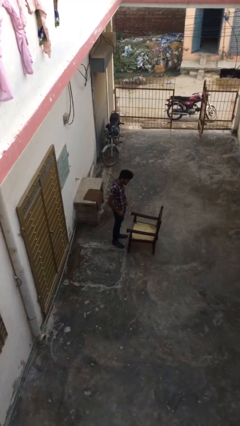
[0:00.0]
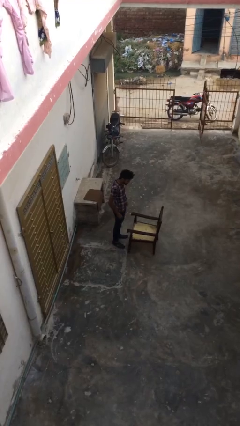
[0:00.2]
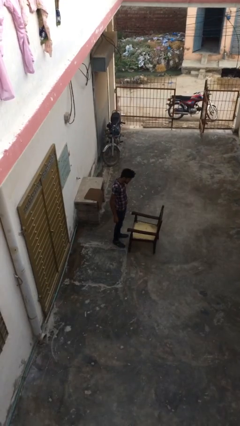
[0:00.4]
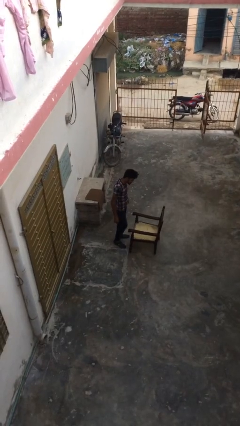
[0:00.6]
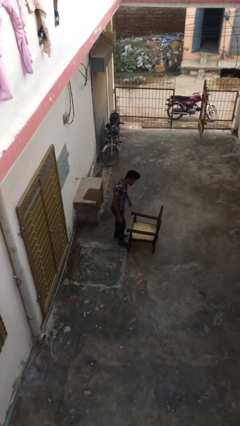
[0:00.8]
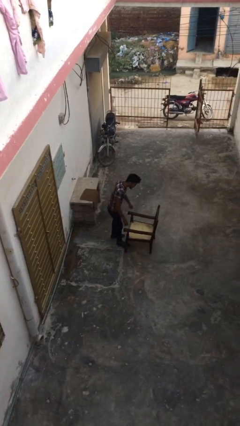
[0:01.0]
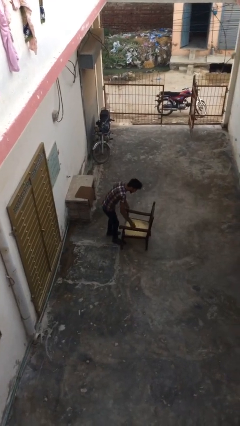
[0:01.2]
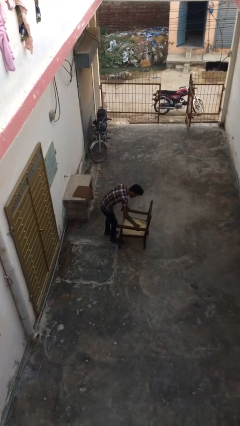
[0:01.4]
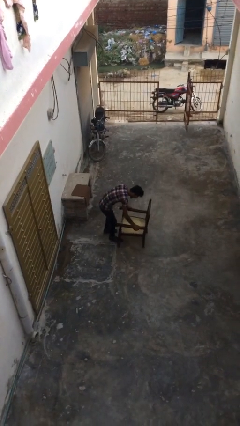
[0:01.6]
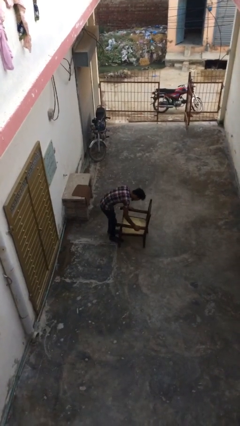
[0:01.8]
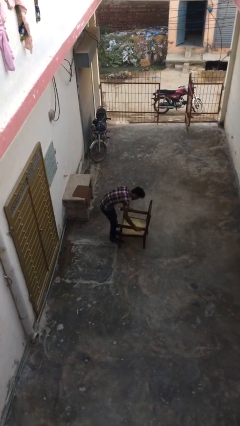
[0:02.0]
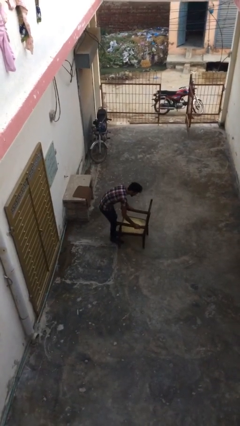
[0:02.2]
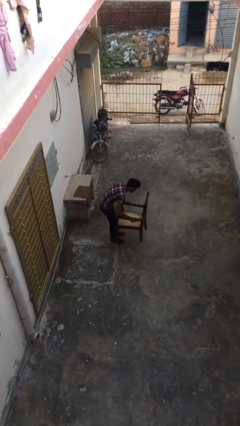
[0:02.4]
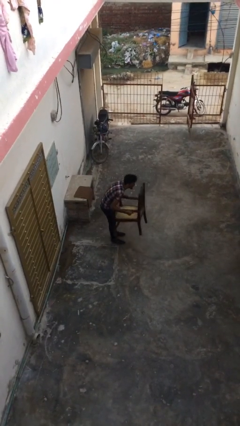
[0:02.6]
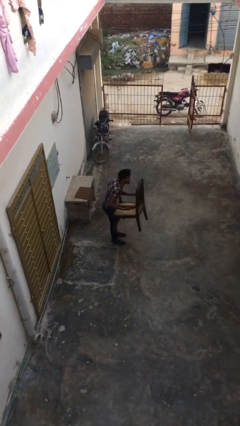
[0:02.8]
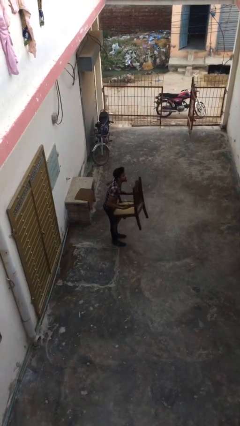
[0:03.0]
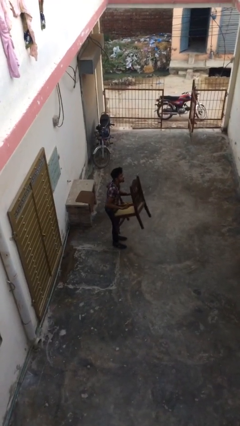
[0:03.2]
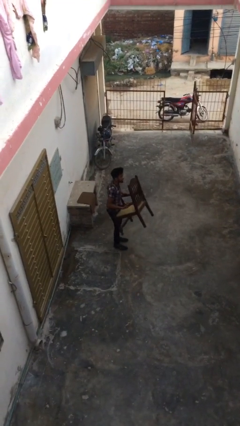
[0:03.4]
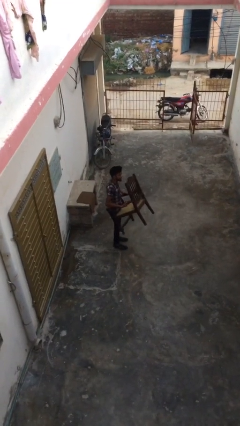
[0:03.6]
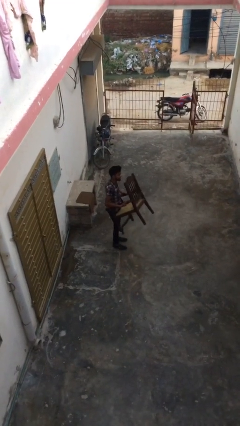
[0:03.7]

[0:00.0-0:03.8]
person picks up object from floor

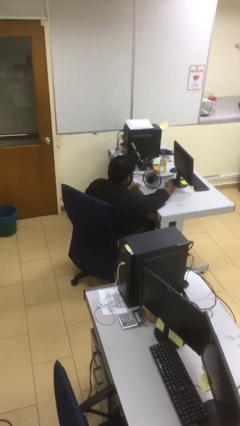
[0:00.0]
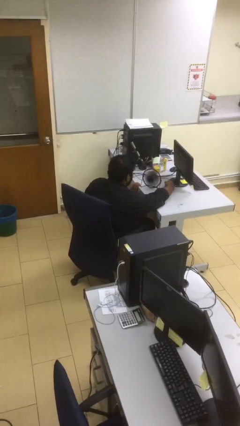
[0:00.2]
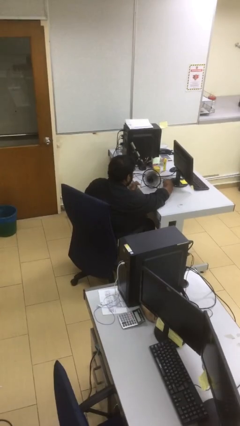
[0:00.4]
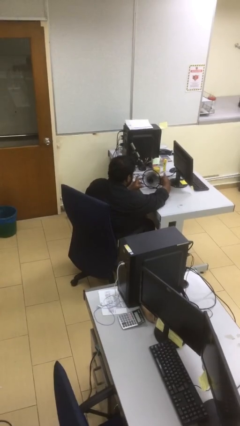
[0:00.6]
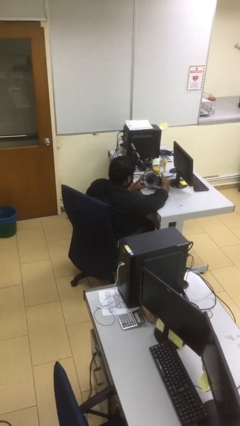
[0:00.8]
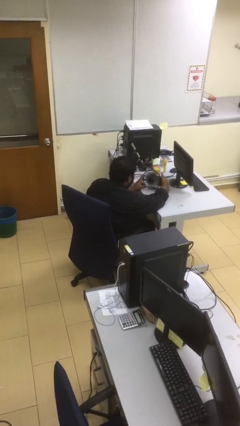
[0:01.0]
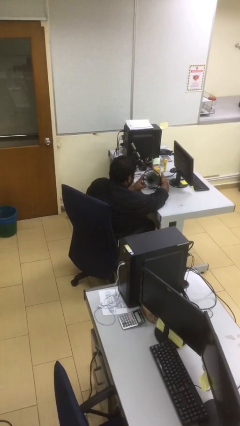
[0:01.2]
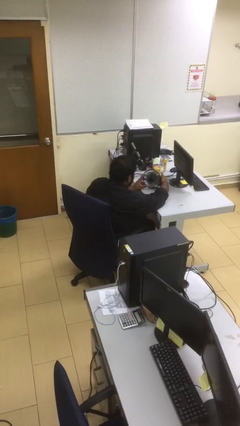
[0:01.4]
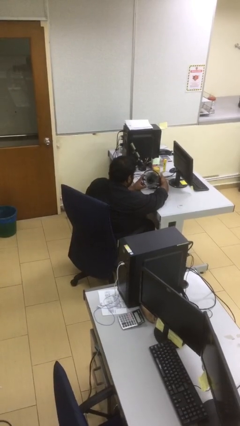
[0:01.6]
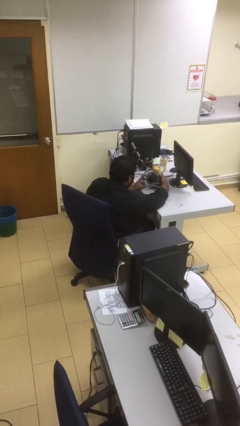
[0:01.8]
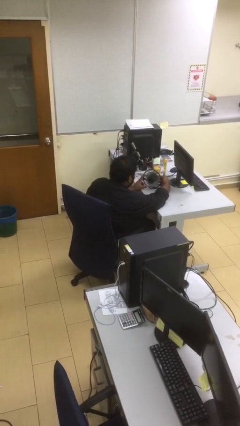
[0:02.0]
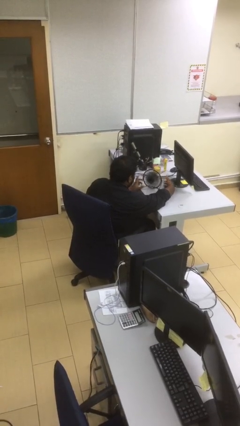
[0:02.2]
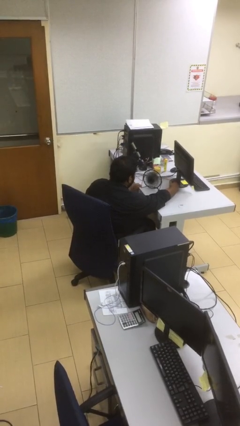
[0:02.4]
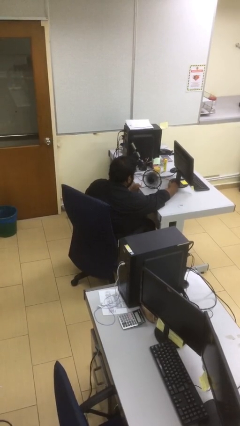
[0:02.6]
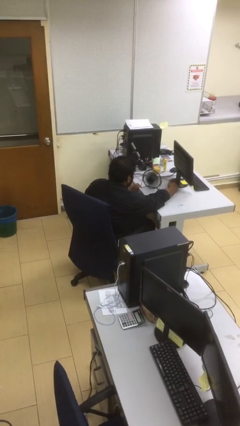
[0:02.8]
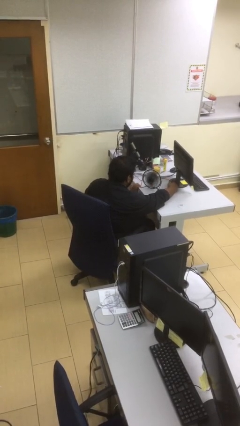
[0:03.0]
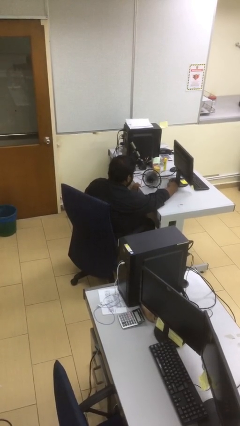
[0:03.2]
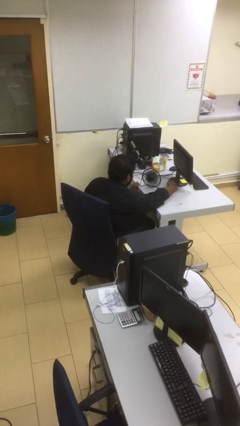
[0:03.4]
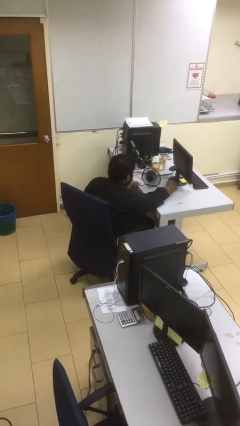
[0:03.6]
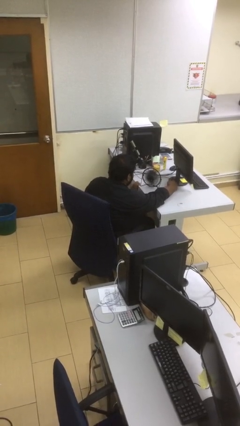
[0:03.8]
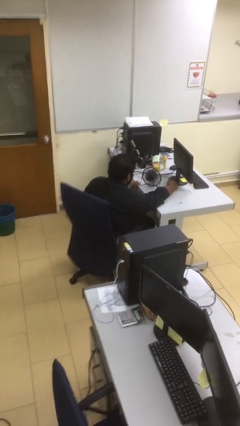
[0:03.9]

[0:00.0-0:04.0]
person turns off fan

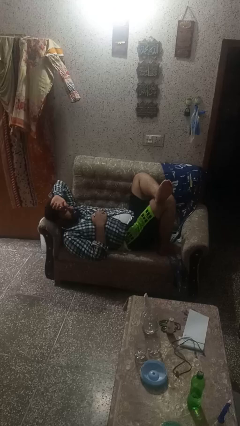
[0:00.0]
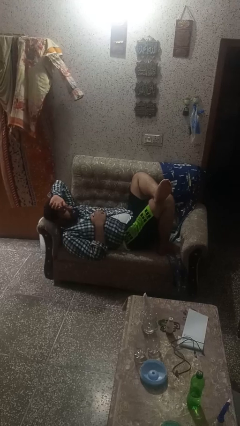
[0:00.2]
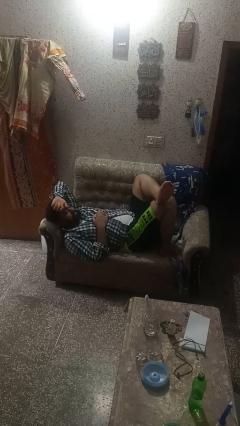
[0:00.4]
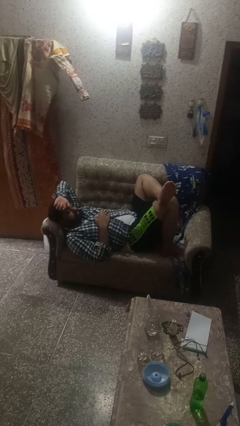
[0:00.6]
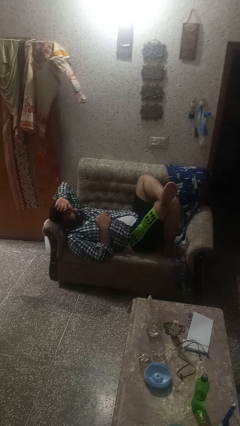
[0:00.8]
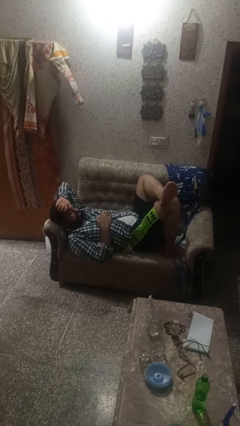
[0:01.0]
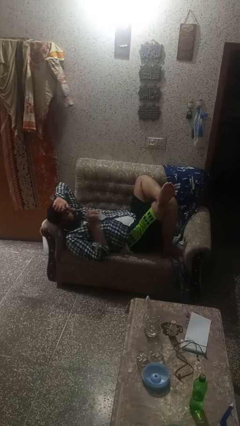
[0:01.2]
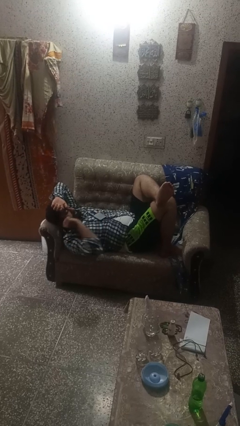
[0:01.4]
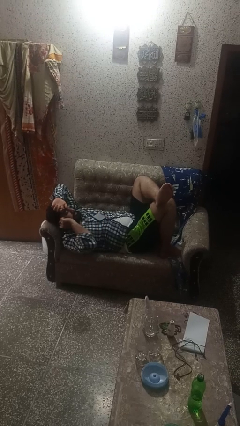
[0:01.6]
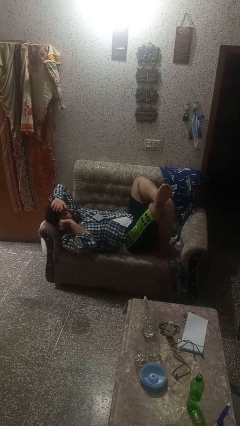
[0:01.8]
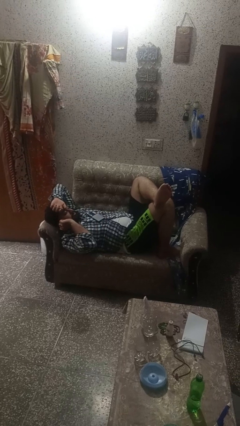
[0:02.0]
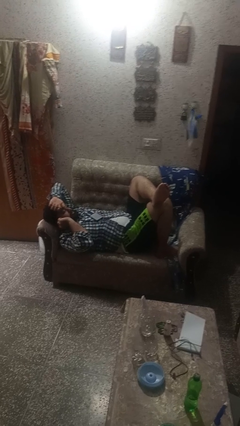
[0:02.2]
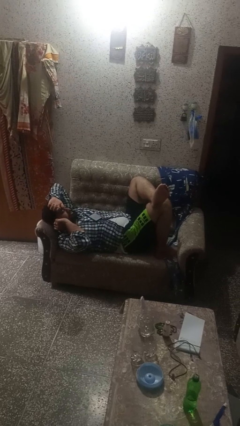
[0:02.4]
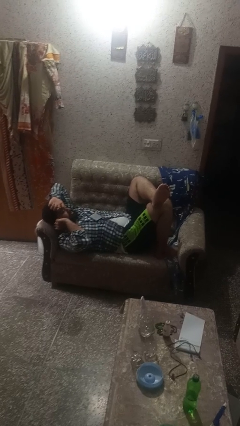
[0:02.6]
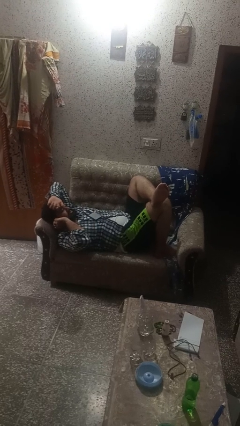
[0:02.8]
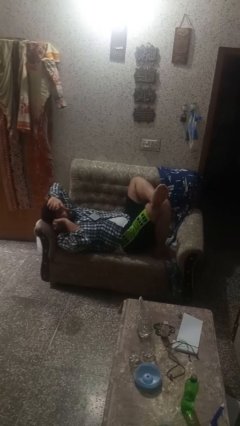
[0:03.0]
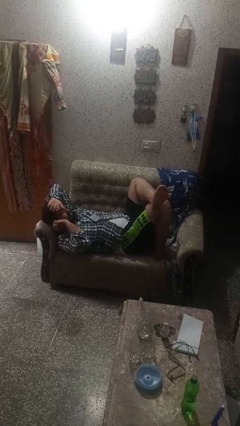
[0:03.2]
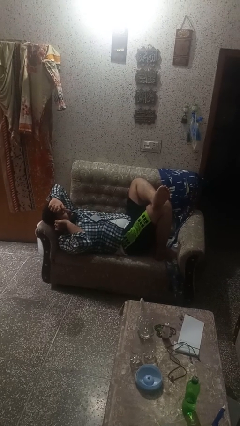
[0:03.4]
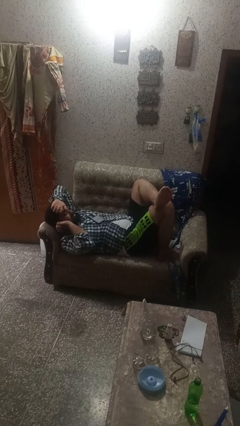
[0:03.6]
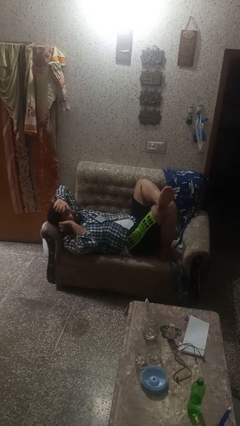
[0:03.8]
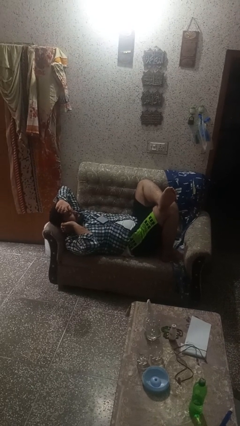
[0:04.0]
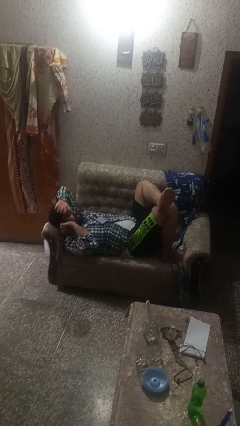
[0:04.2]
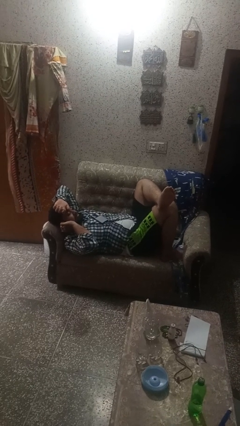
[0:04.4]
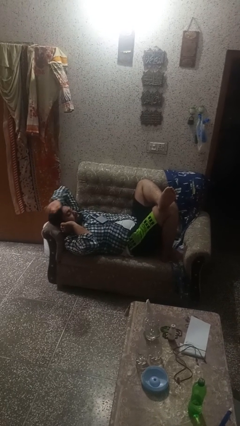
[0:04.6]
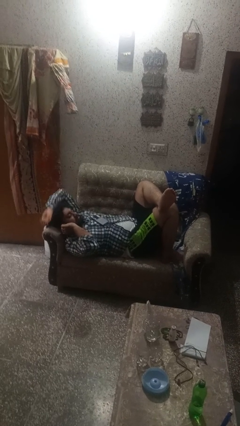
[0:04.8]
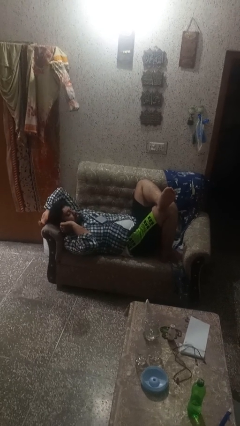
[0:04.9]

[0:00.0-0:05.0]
person touches earlobe

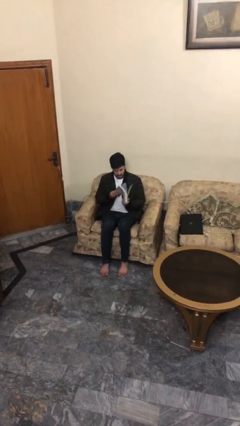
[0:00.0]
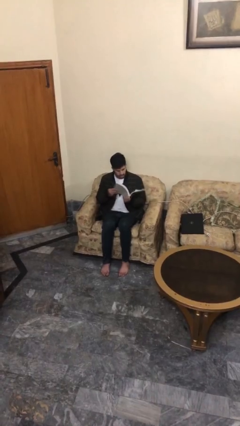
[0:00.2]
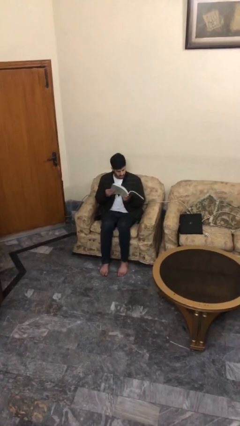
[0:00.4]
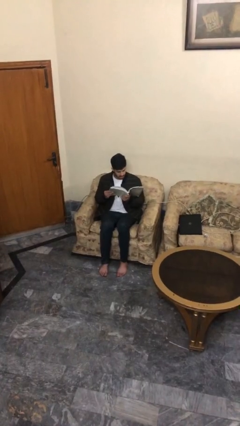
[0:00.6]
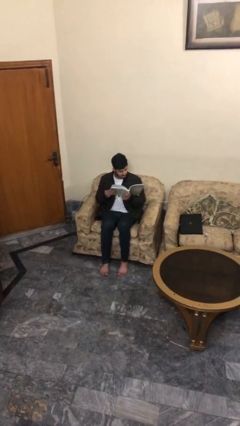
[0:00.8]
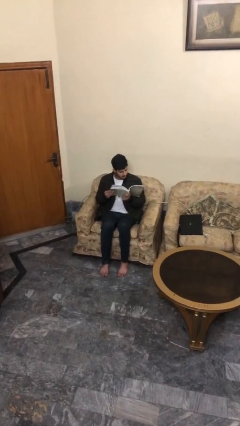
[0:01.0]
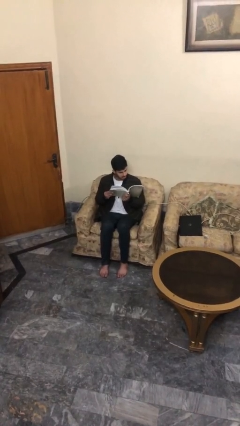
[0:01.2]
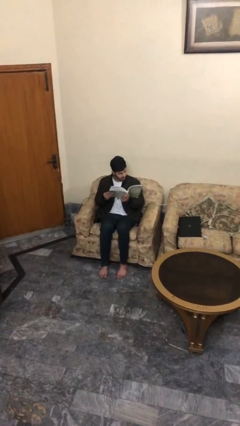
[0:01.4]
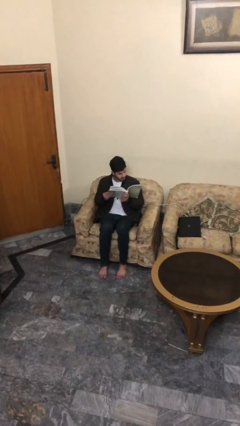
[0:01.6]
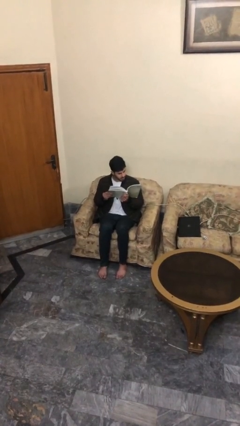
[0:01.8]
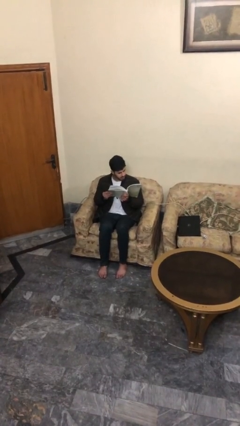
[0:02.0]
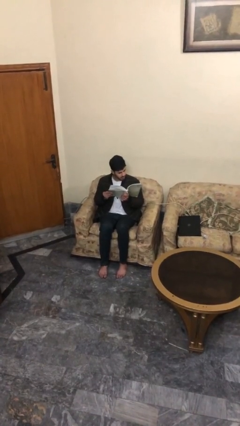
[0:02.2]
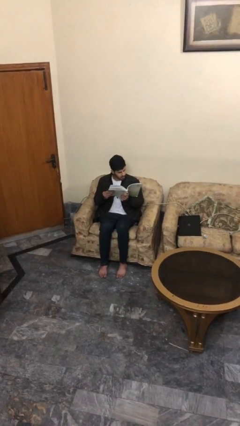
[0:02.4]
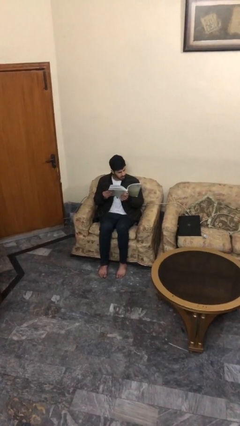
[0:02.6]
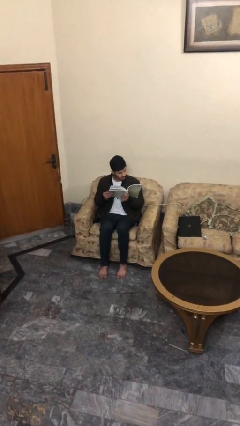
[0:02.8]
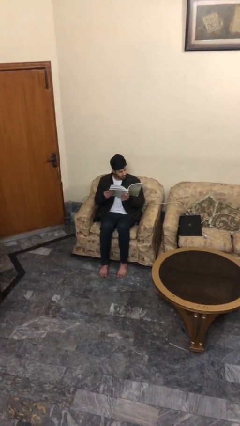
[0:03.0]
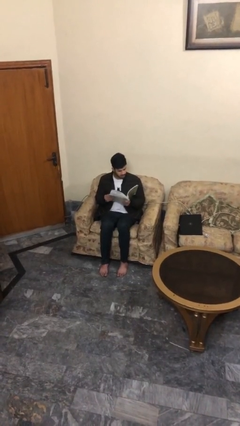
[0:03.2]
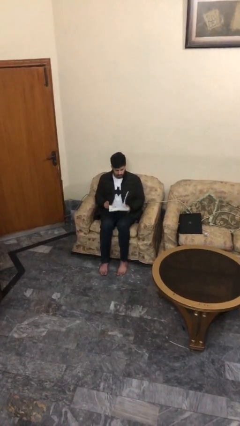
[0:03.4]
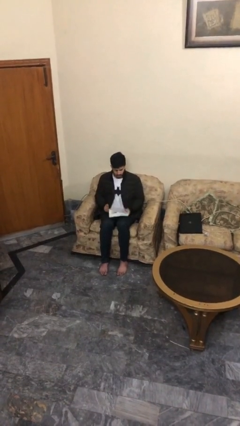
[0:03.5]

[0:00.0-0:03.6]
person reads document

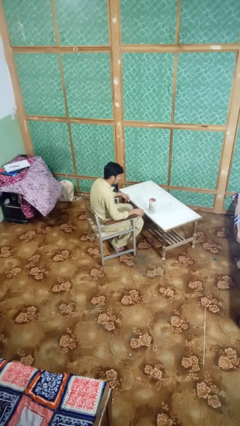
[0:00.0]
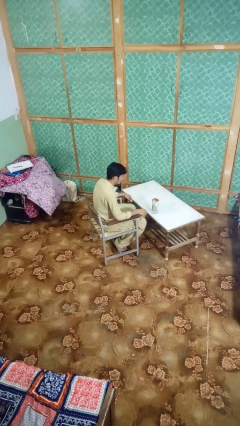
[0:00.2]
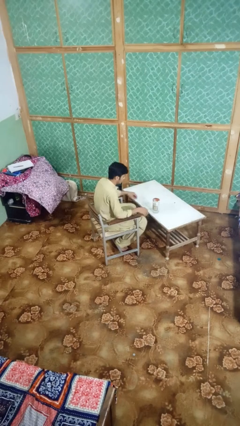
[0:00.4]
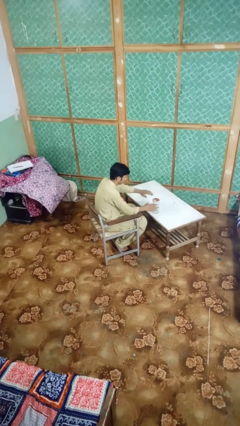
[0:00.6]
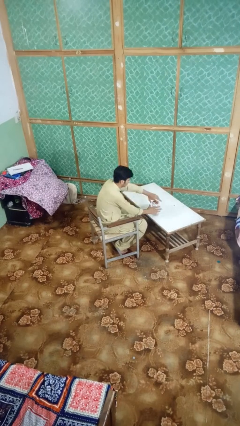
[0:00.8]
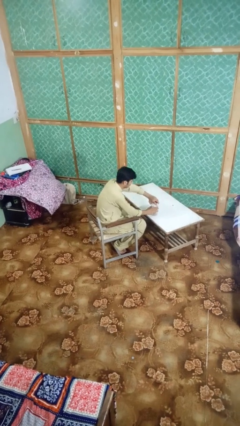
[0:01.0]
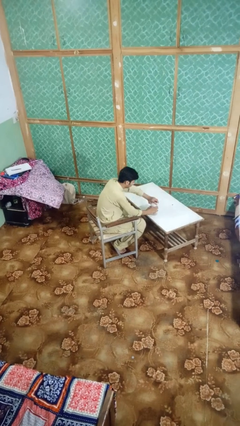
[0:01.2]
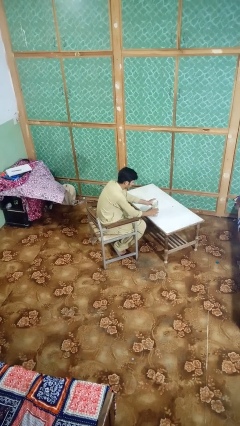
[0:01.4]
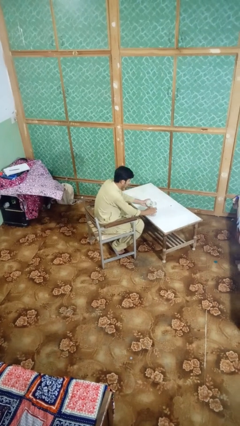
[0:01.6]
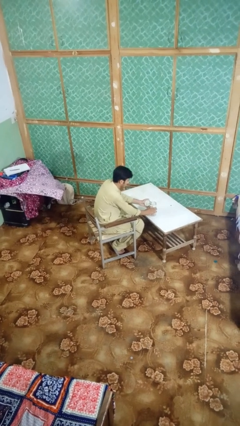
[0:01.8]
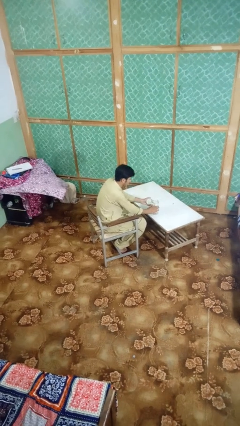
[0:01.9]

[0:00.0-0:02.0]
person opens jar
